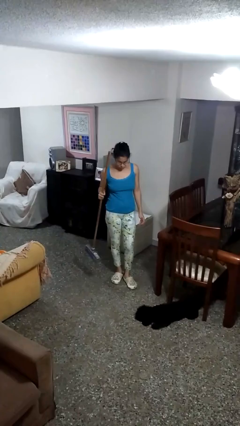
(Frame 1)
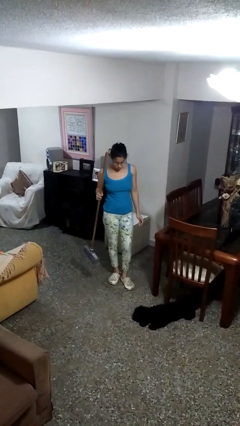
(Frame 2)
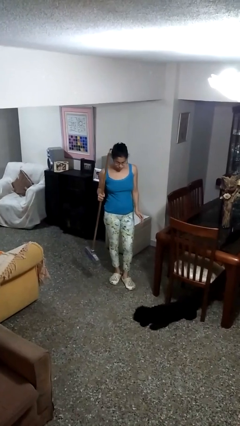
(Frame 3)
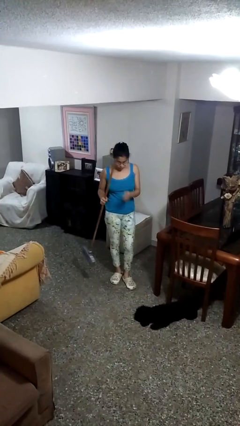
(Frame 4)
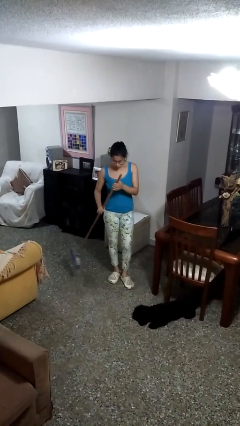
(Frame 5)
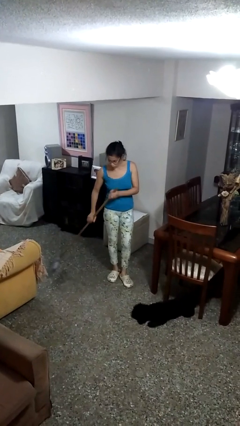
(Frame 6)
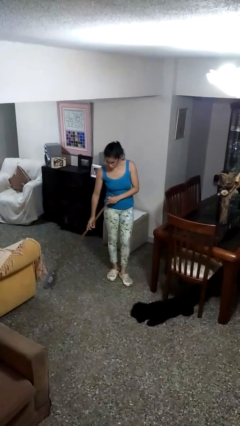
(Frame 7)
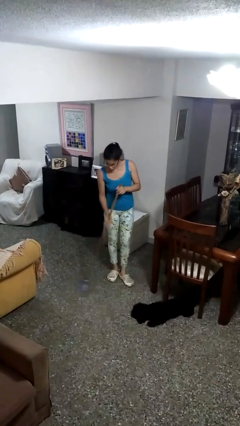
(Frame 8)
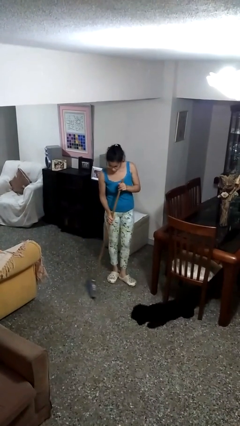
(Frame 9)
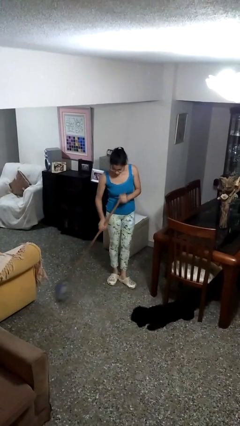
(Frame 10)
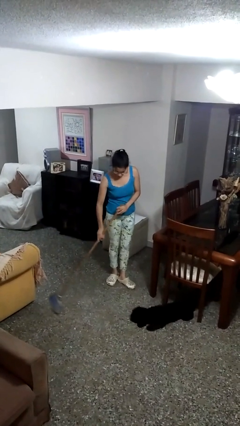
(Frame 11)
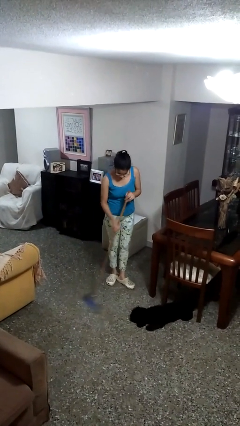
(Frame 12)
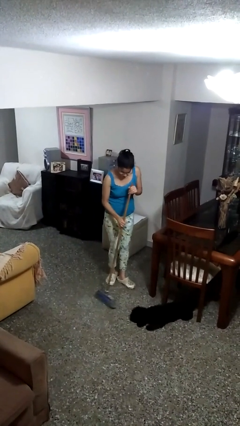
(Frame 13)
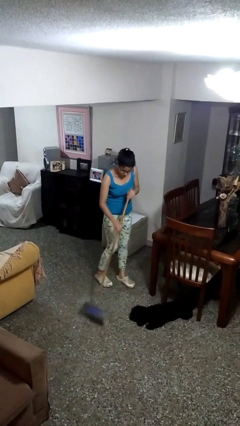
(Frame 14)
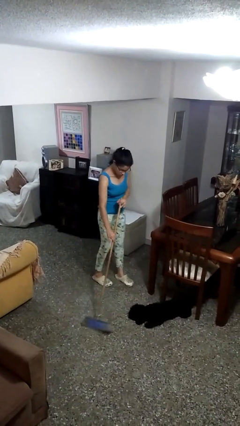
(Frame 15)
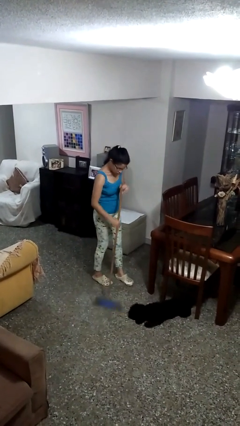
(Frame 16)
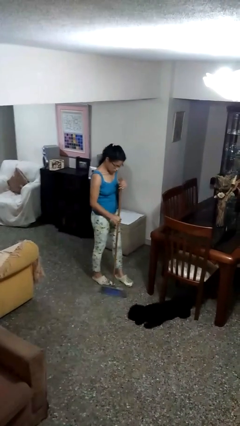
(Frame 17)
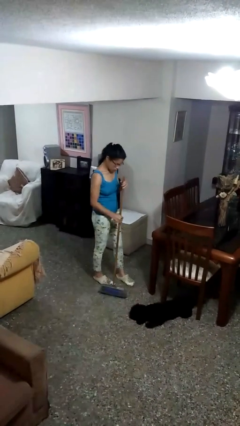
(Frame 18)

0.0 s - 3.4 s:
person sweeps floor

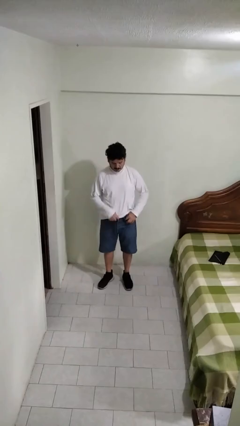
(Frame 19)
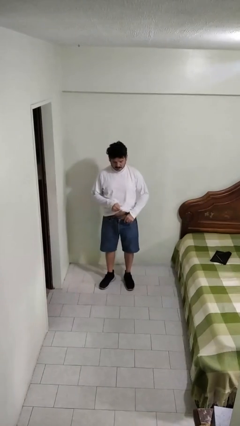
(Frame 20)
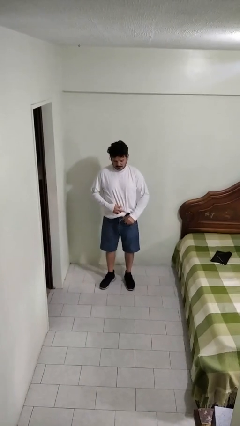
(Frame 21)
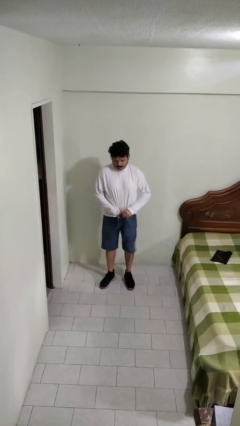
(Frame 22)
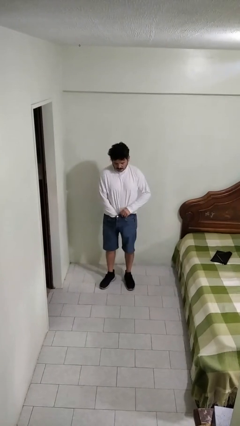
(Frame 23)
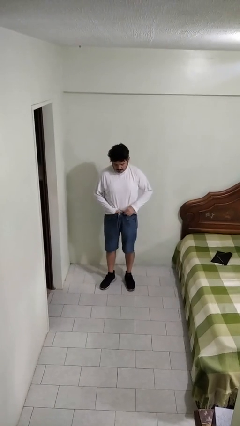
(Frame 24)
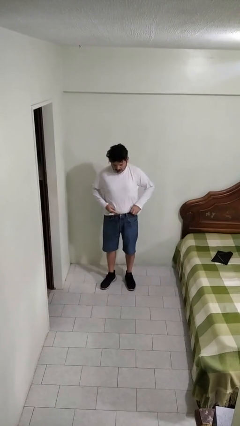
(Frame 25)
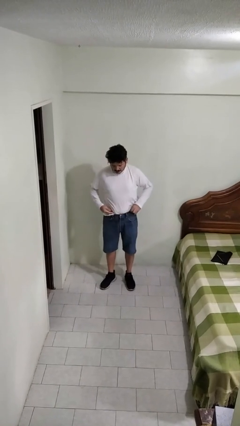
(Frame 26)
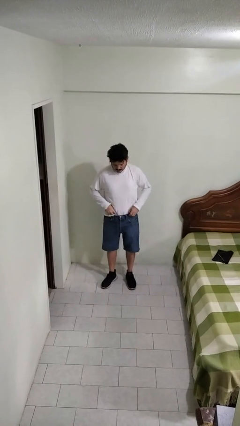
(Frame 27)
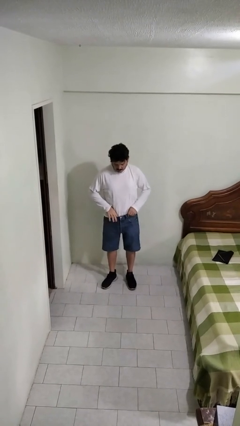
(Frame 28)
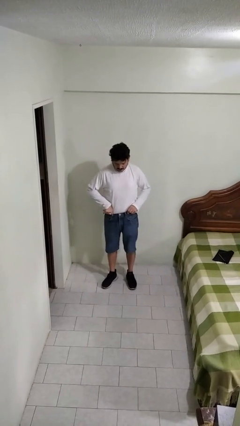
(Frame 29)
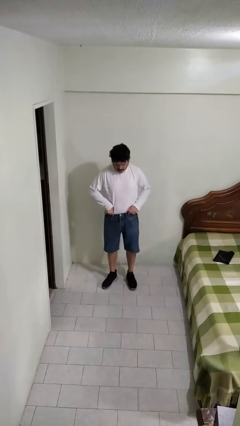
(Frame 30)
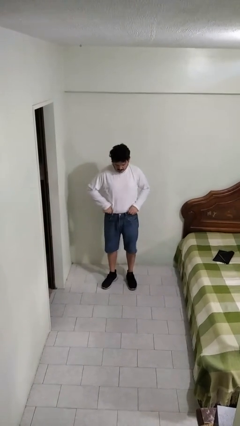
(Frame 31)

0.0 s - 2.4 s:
person tucks in shirt

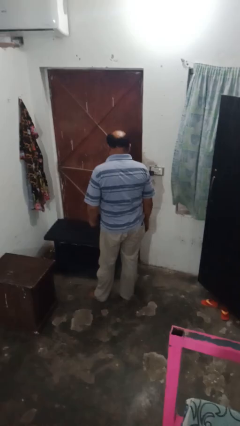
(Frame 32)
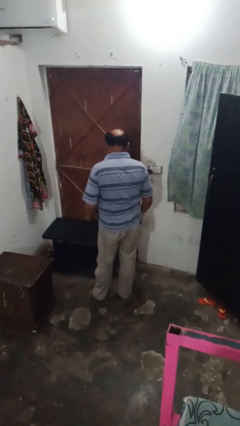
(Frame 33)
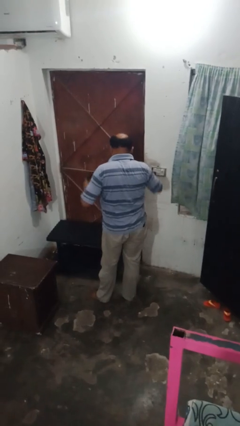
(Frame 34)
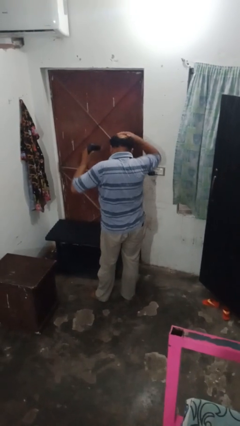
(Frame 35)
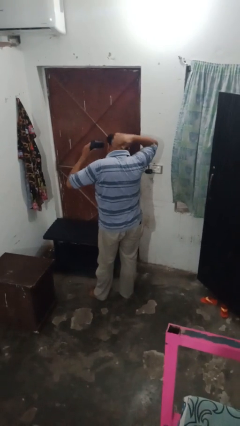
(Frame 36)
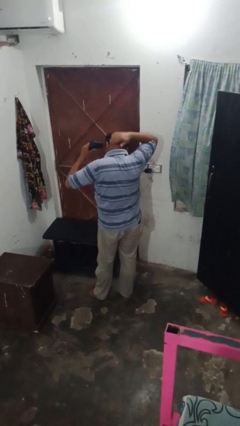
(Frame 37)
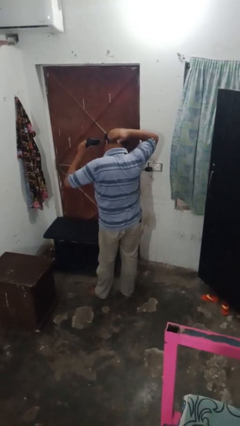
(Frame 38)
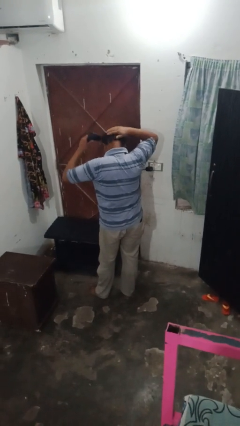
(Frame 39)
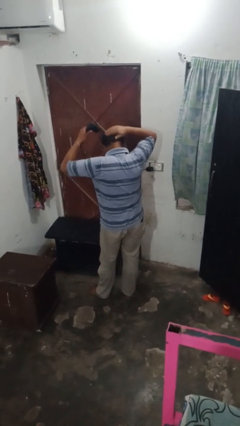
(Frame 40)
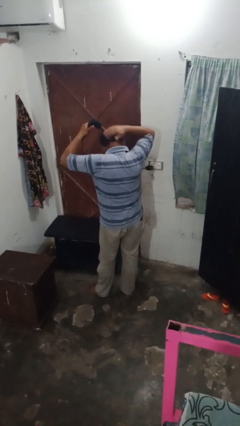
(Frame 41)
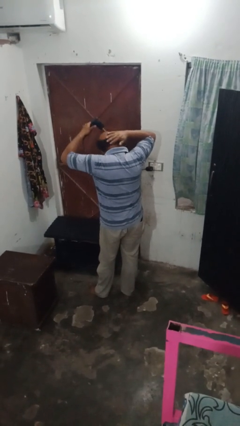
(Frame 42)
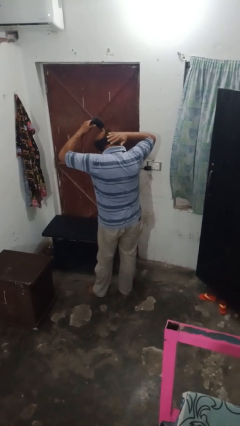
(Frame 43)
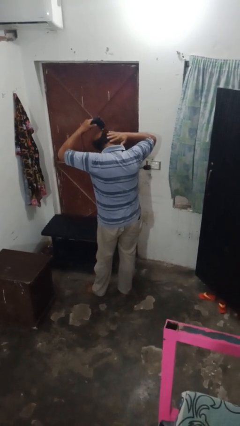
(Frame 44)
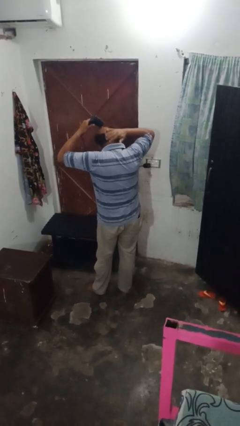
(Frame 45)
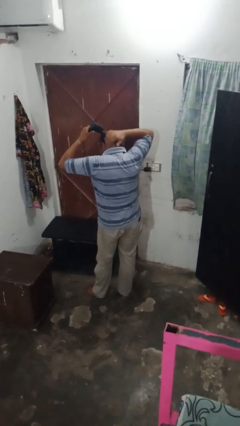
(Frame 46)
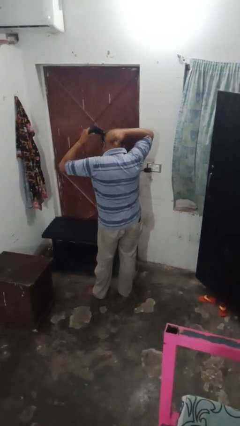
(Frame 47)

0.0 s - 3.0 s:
person dries hair with hairdryer

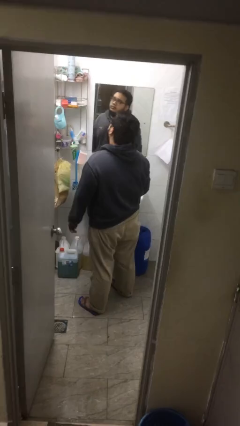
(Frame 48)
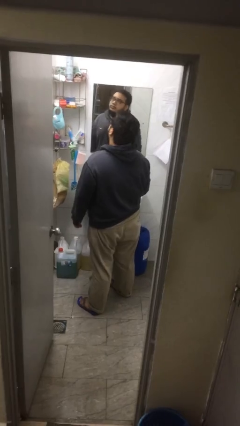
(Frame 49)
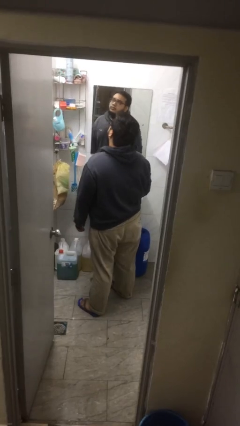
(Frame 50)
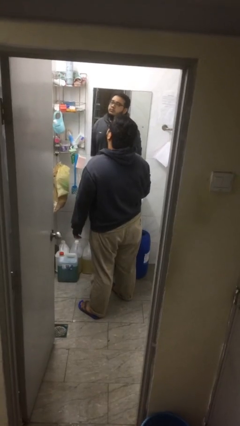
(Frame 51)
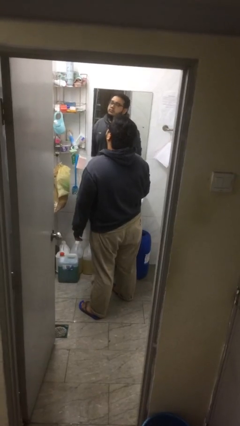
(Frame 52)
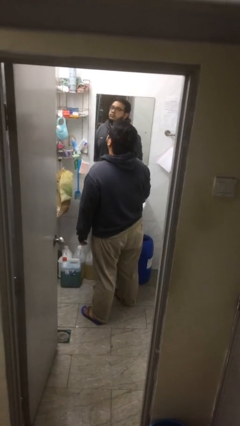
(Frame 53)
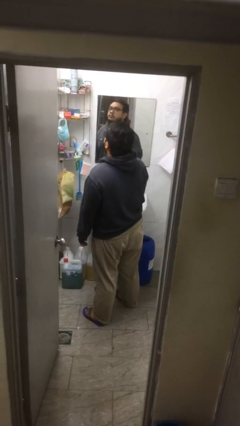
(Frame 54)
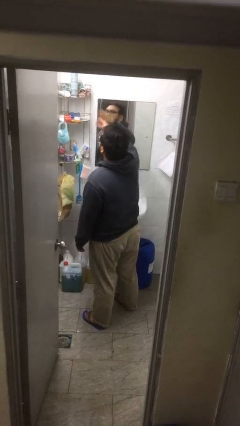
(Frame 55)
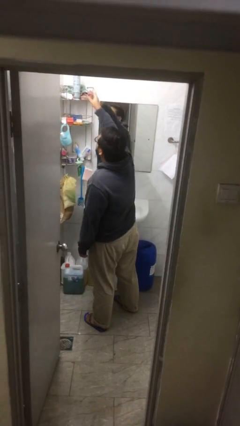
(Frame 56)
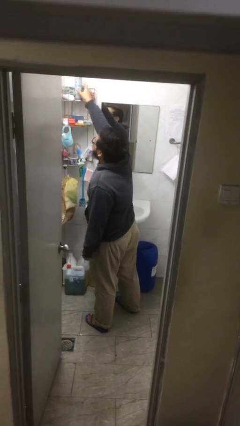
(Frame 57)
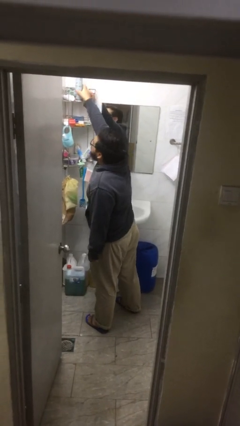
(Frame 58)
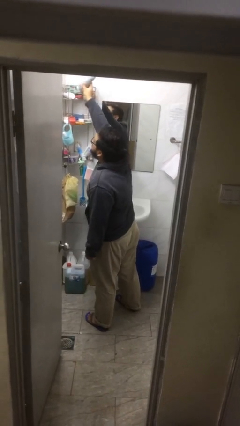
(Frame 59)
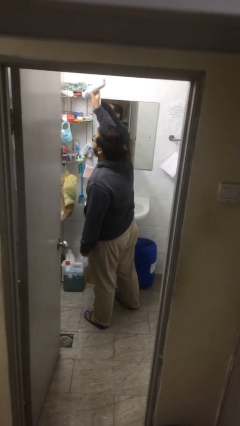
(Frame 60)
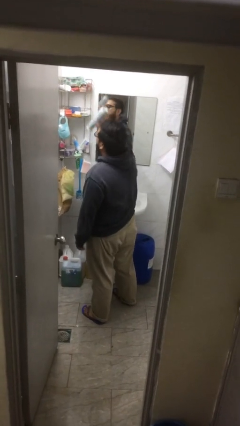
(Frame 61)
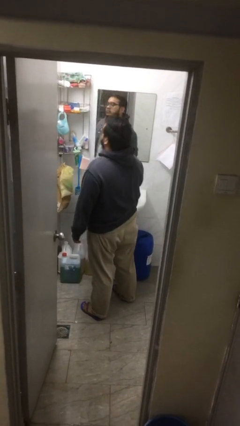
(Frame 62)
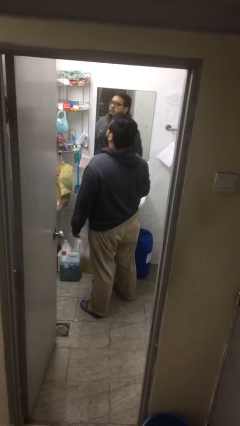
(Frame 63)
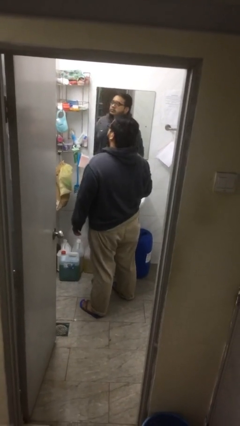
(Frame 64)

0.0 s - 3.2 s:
person picks up object from countertop

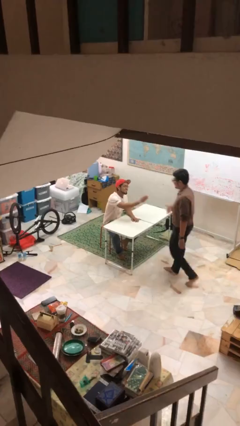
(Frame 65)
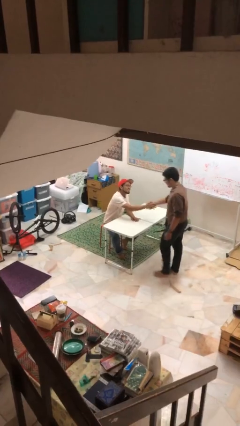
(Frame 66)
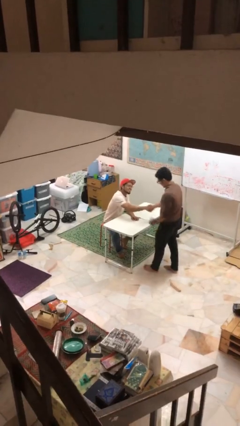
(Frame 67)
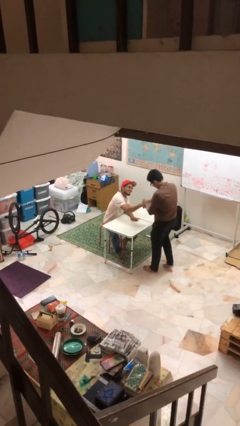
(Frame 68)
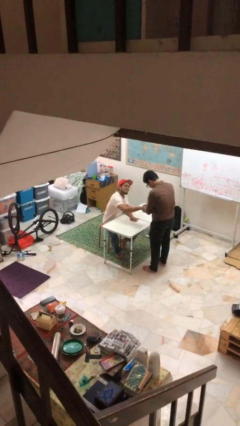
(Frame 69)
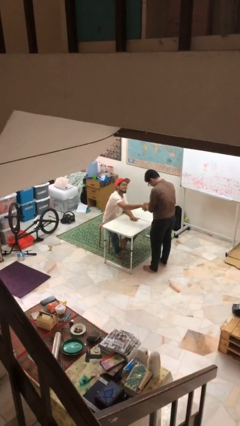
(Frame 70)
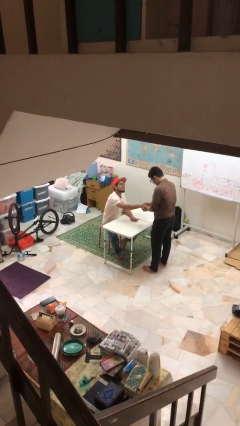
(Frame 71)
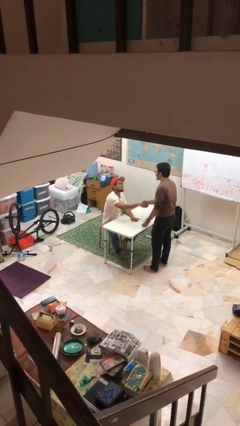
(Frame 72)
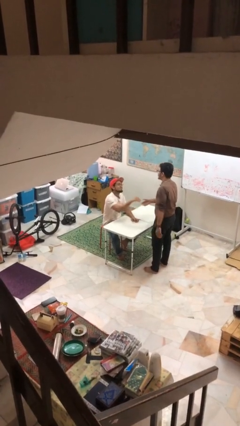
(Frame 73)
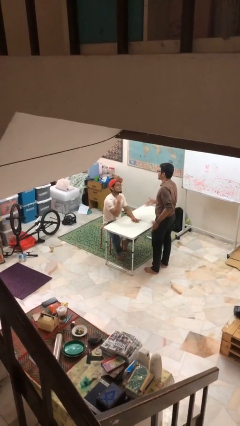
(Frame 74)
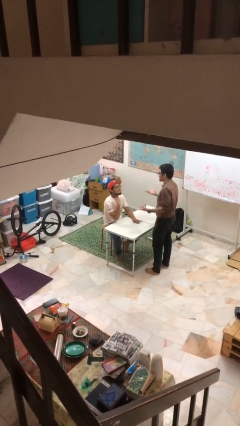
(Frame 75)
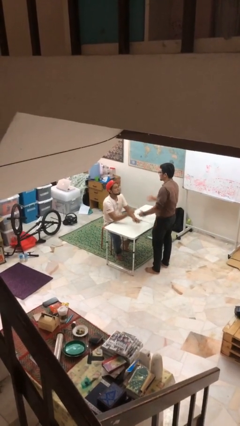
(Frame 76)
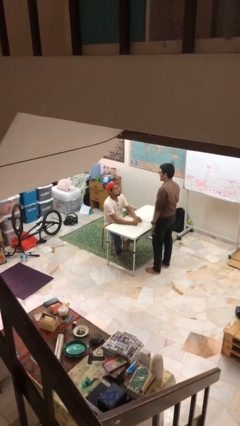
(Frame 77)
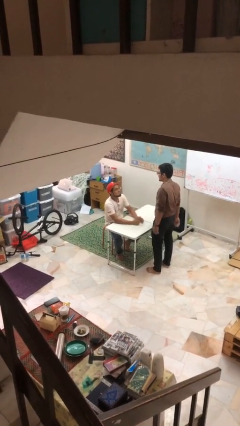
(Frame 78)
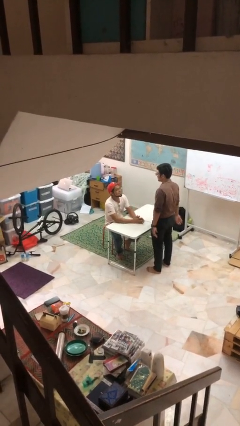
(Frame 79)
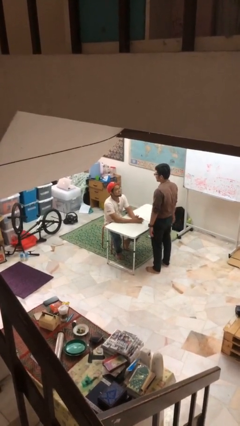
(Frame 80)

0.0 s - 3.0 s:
person shakes hand

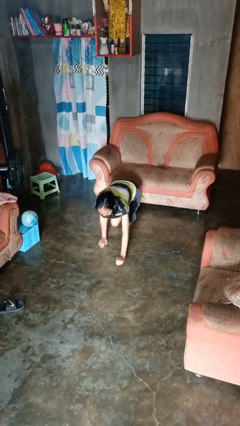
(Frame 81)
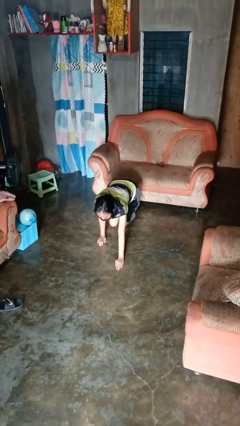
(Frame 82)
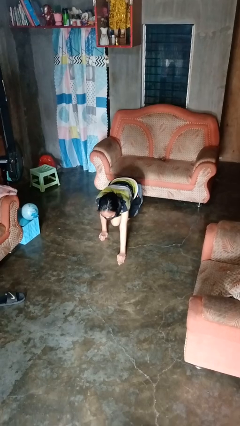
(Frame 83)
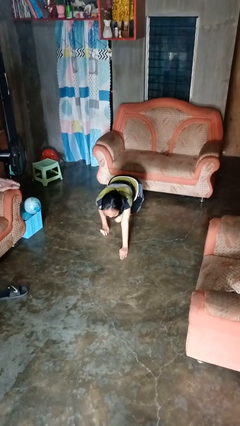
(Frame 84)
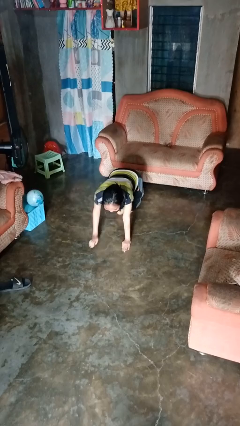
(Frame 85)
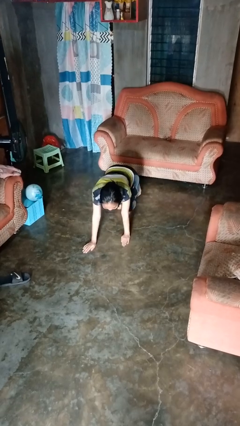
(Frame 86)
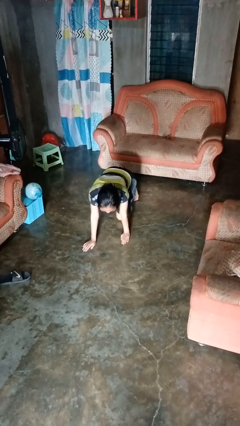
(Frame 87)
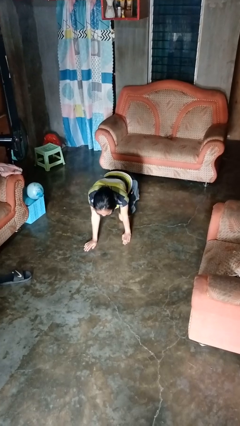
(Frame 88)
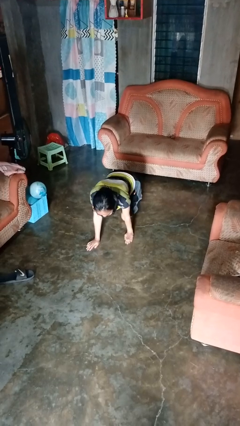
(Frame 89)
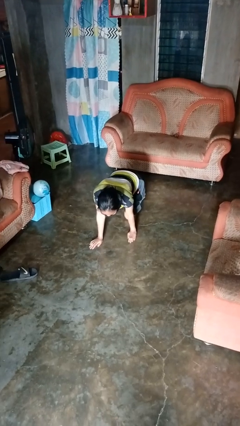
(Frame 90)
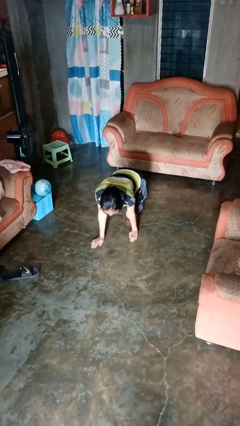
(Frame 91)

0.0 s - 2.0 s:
person crawls

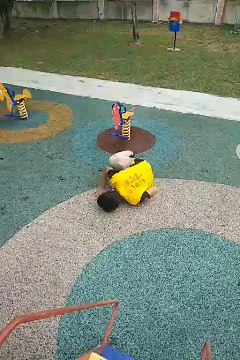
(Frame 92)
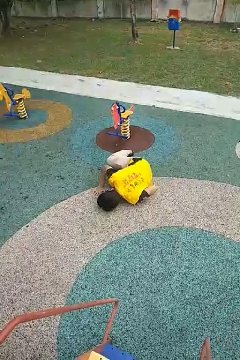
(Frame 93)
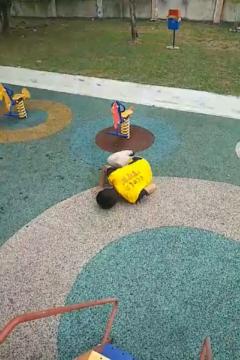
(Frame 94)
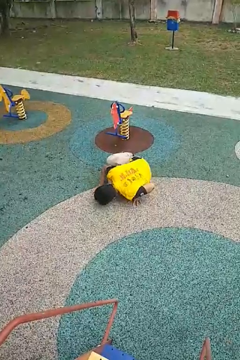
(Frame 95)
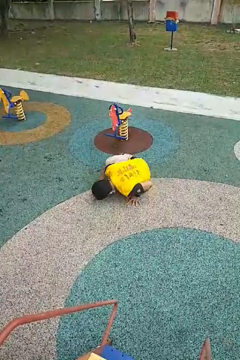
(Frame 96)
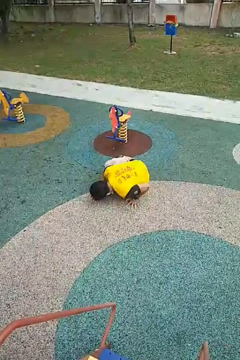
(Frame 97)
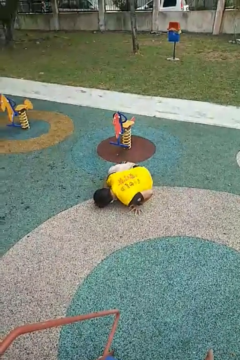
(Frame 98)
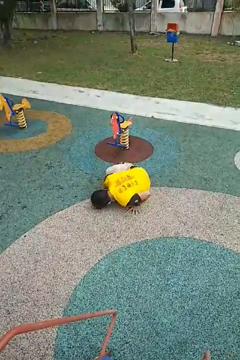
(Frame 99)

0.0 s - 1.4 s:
person lies down on floor
